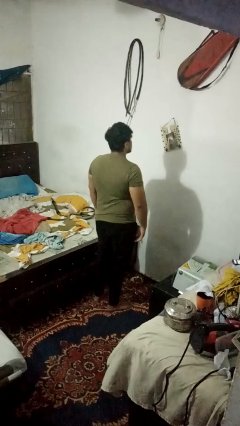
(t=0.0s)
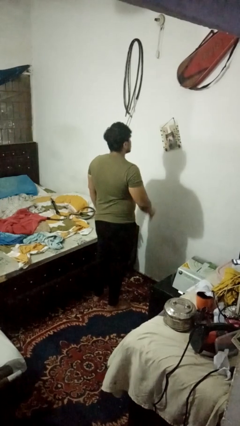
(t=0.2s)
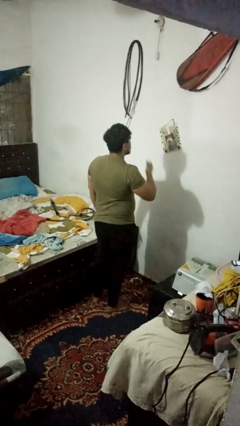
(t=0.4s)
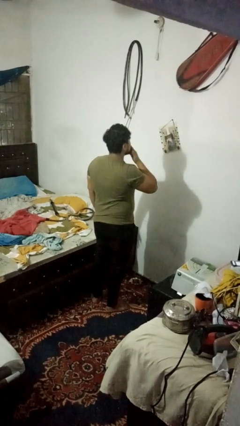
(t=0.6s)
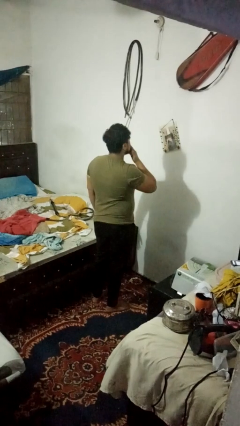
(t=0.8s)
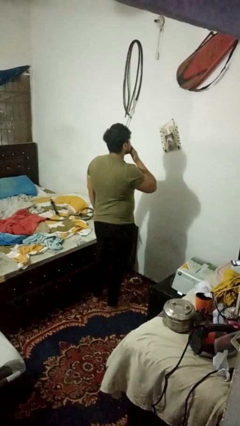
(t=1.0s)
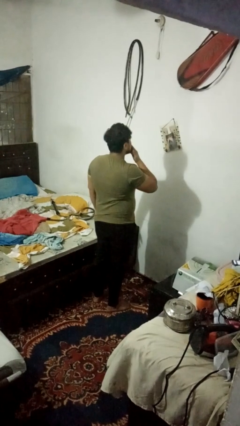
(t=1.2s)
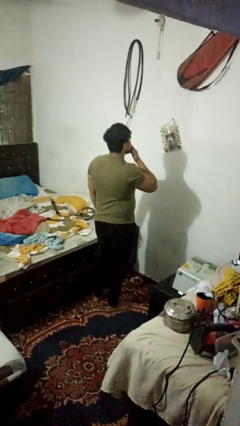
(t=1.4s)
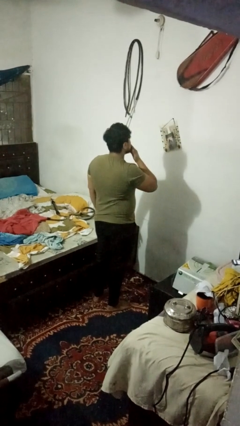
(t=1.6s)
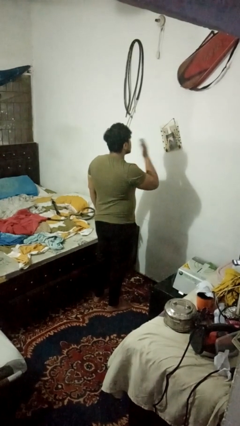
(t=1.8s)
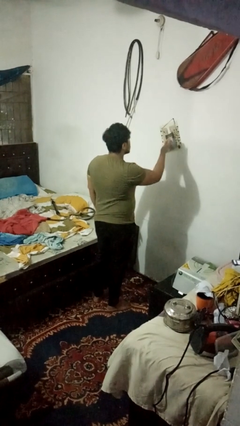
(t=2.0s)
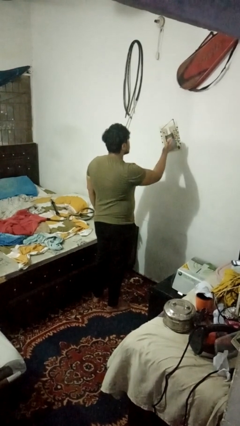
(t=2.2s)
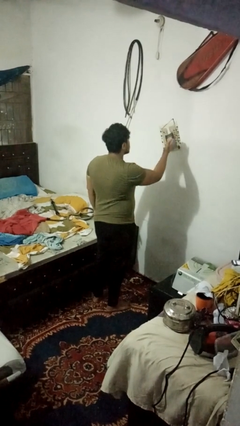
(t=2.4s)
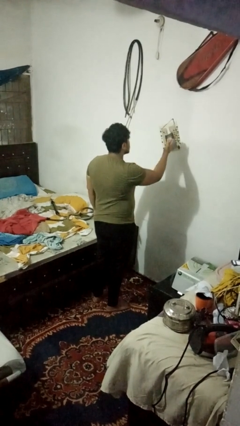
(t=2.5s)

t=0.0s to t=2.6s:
person gestures blow kiss

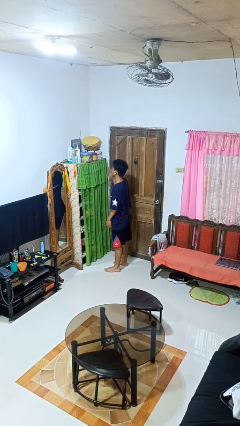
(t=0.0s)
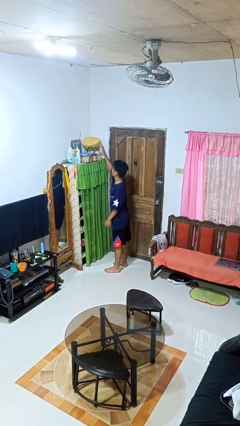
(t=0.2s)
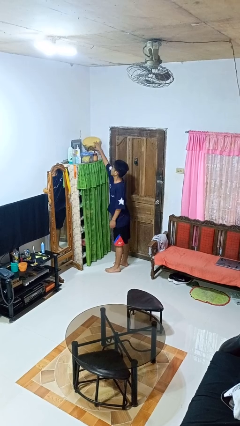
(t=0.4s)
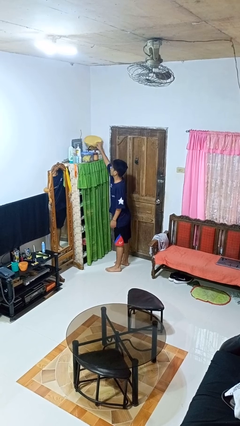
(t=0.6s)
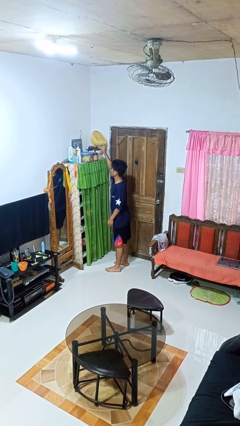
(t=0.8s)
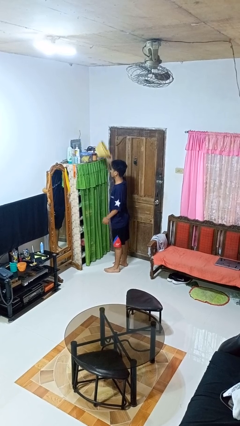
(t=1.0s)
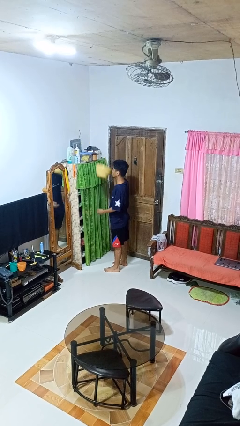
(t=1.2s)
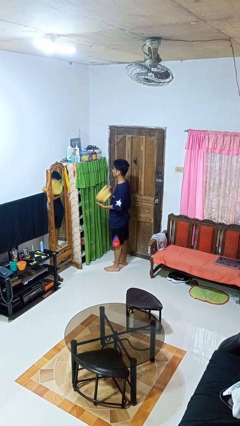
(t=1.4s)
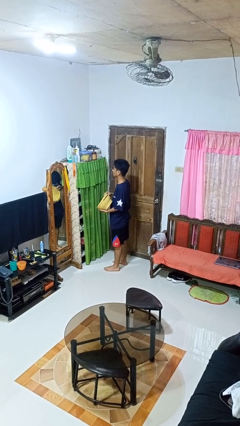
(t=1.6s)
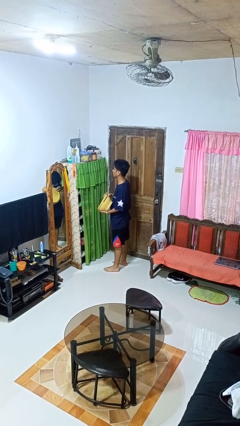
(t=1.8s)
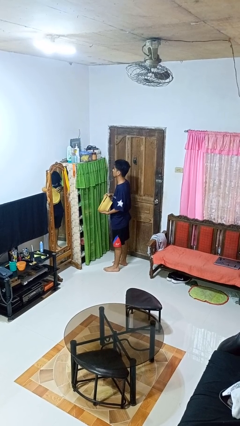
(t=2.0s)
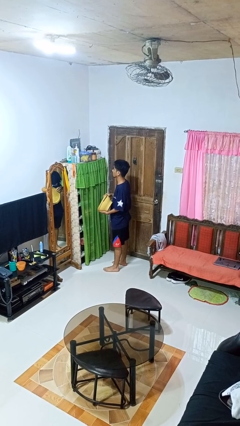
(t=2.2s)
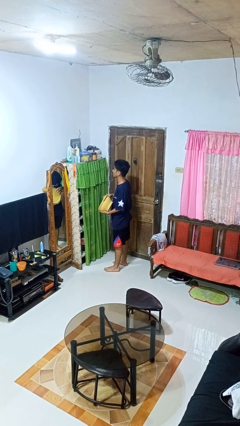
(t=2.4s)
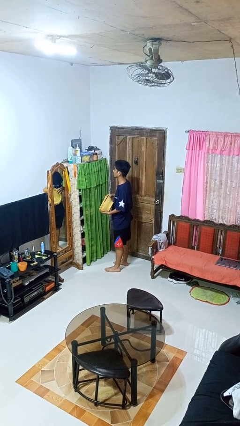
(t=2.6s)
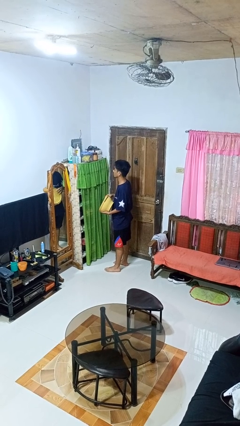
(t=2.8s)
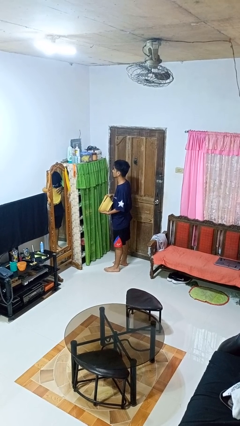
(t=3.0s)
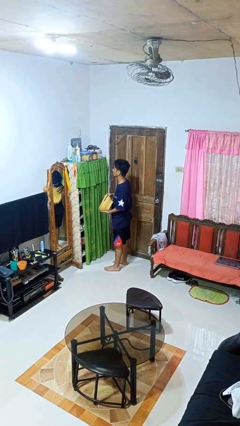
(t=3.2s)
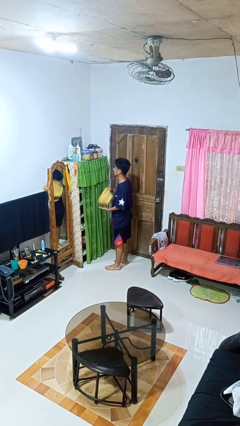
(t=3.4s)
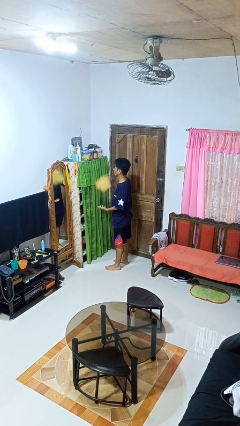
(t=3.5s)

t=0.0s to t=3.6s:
person picks up object from shelf

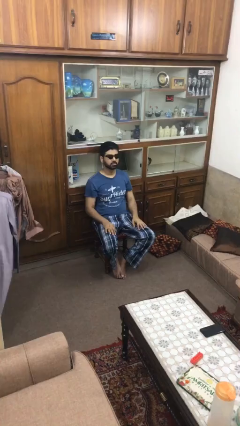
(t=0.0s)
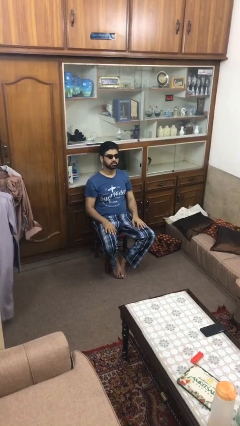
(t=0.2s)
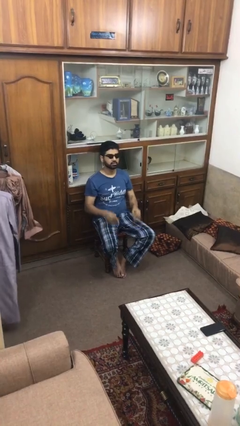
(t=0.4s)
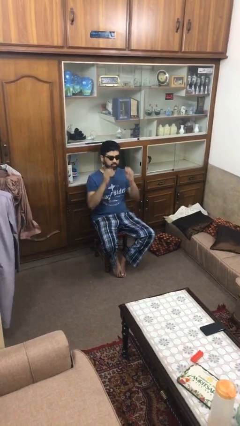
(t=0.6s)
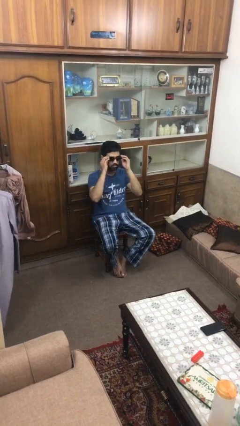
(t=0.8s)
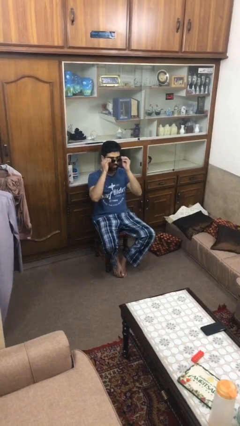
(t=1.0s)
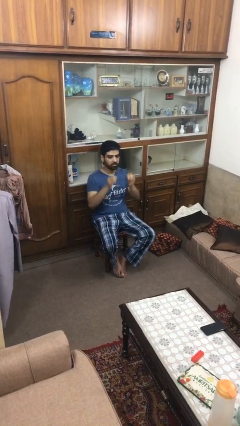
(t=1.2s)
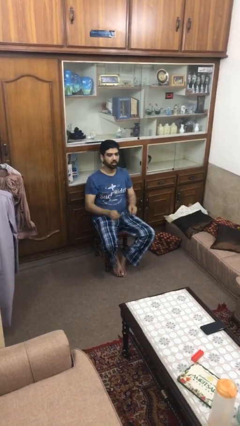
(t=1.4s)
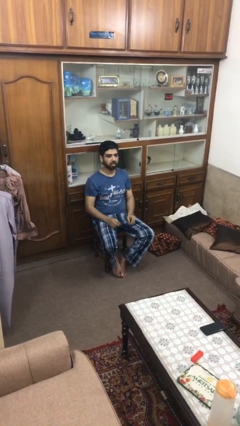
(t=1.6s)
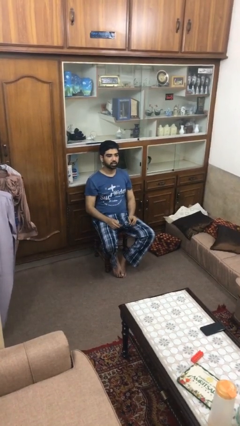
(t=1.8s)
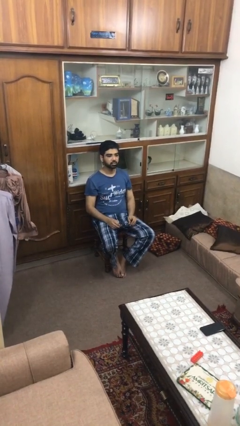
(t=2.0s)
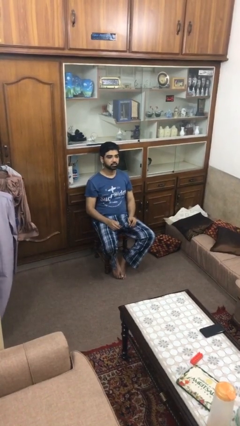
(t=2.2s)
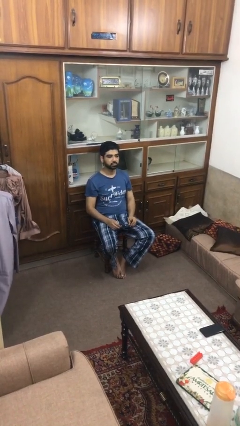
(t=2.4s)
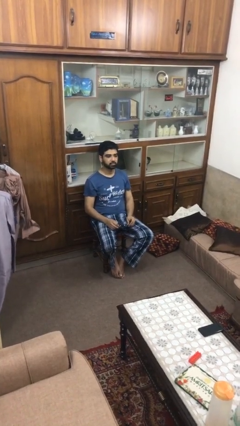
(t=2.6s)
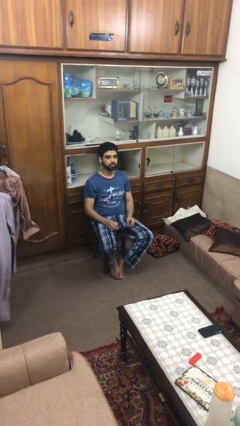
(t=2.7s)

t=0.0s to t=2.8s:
person takes off sunglasses

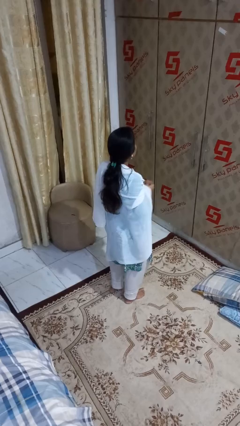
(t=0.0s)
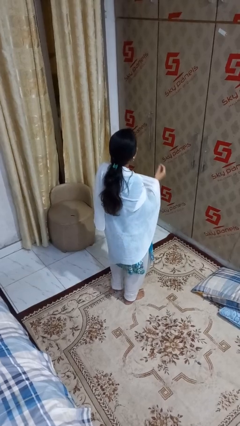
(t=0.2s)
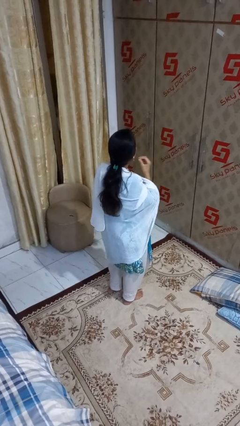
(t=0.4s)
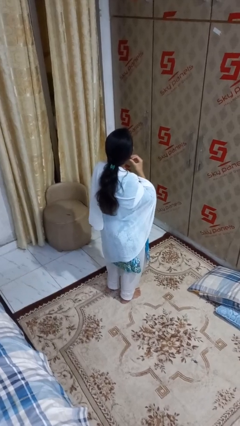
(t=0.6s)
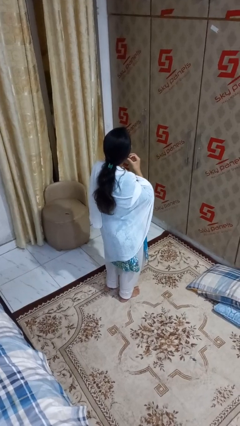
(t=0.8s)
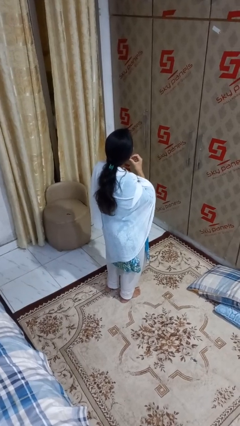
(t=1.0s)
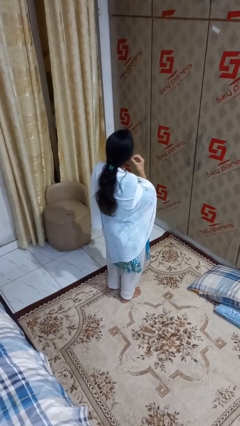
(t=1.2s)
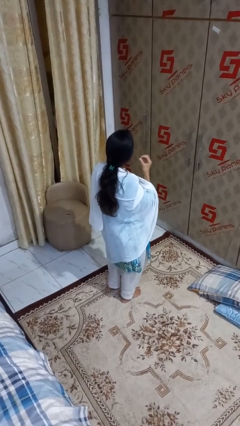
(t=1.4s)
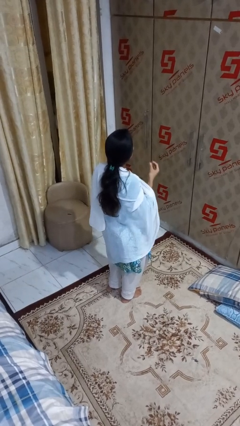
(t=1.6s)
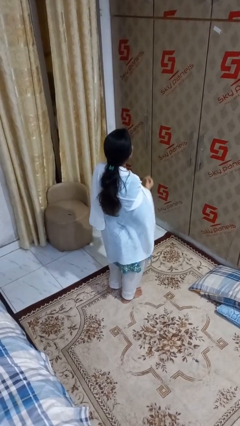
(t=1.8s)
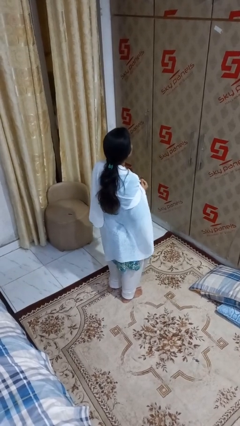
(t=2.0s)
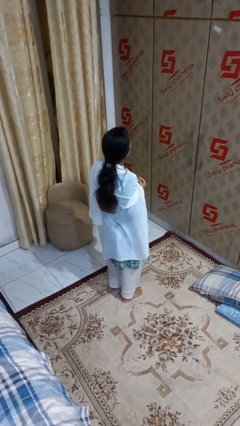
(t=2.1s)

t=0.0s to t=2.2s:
person takes off earrings

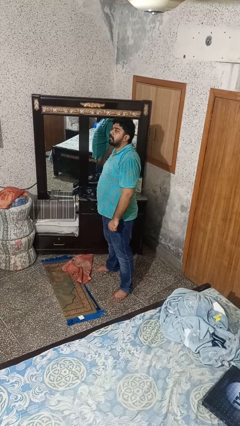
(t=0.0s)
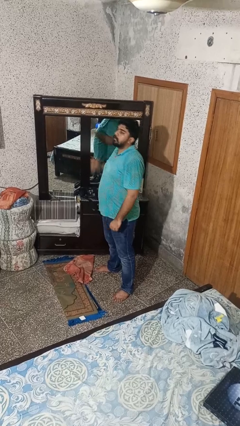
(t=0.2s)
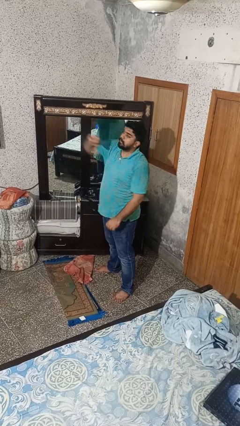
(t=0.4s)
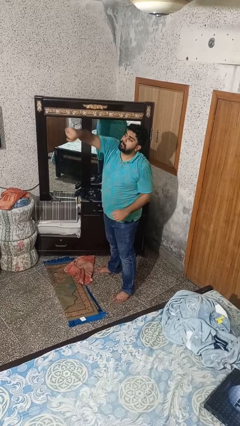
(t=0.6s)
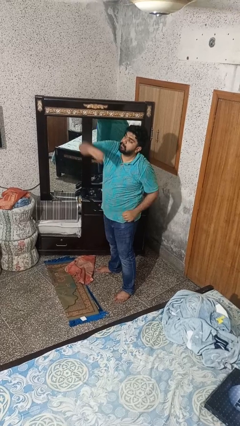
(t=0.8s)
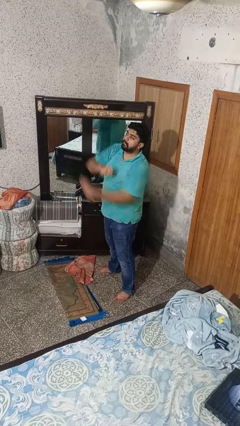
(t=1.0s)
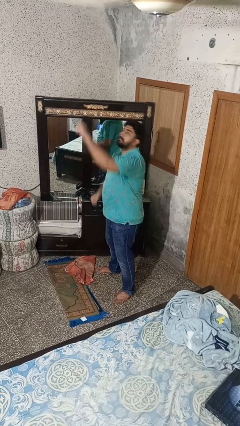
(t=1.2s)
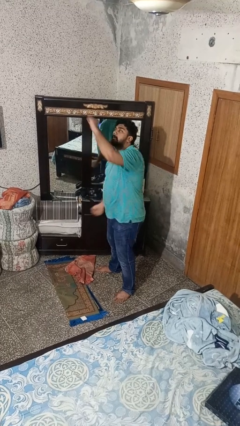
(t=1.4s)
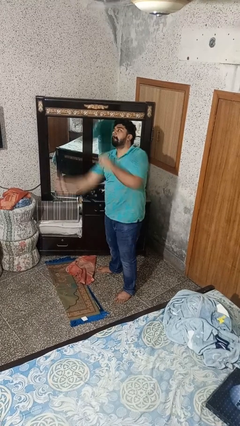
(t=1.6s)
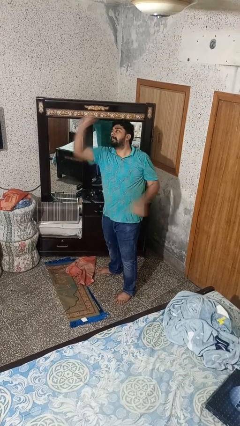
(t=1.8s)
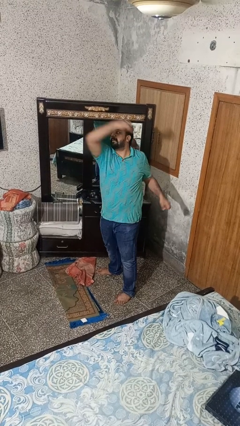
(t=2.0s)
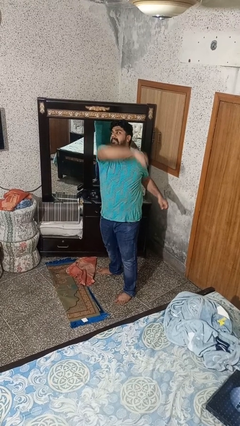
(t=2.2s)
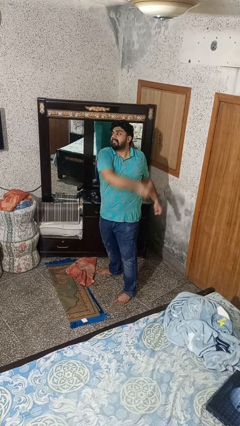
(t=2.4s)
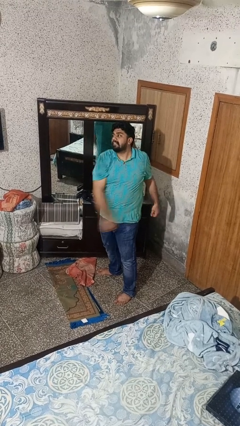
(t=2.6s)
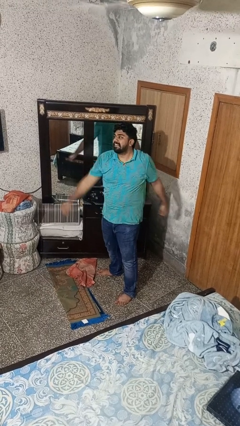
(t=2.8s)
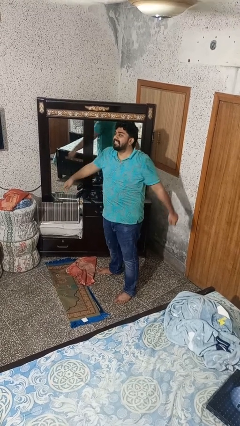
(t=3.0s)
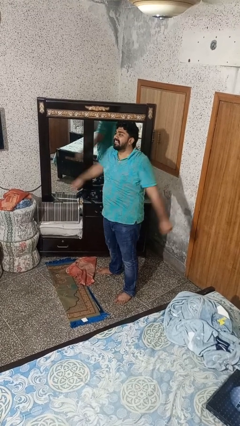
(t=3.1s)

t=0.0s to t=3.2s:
person punches

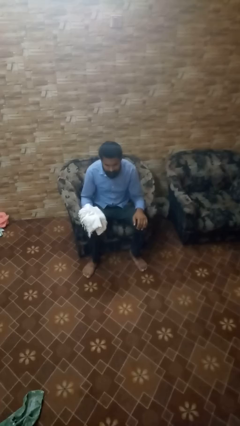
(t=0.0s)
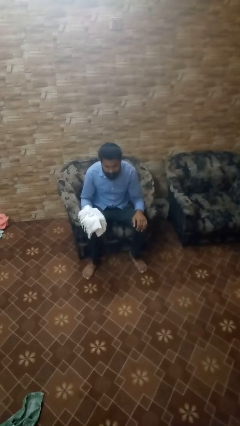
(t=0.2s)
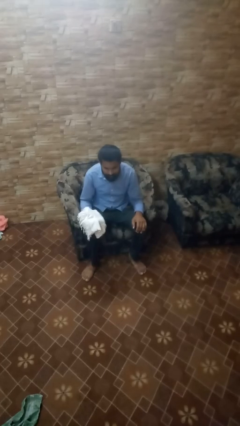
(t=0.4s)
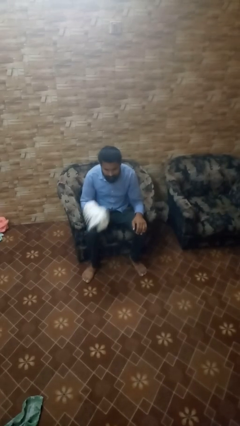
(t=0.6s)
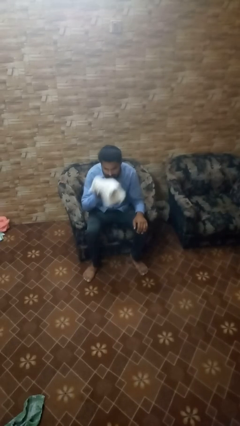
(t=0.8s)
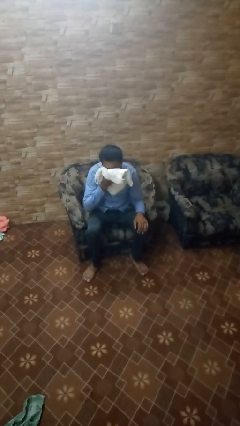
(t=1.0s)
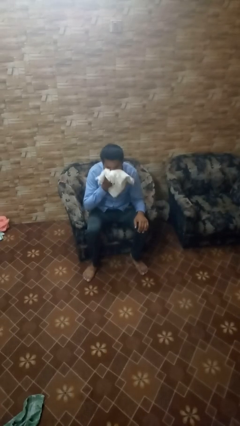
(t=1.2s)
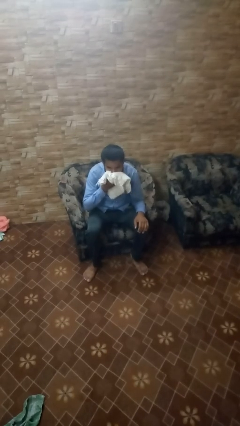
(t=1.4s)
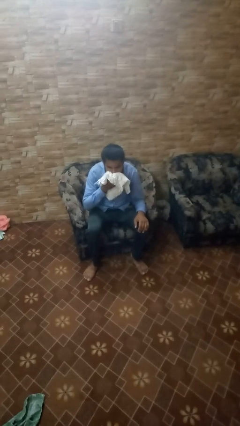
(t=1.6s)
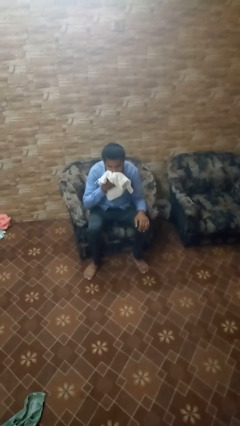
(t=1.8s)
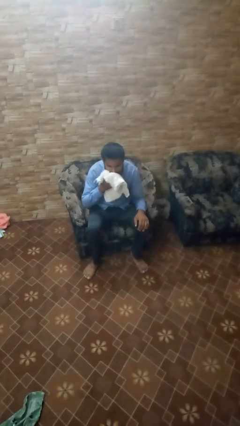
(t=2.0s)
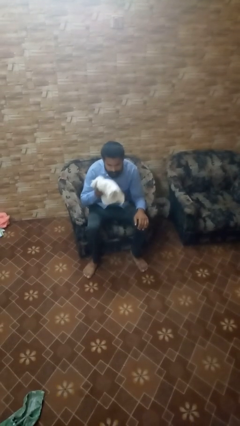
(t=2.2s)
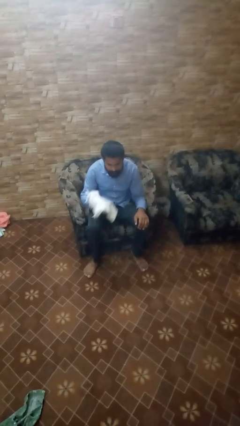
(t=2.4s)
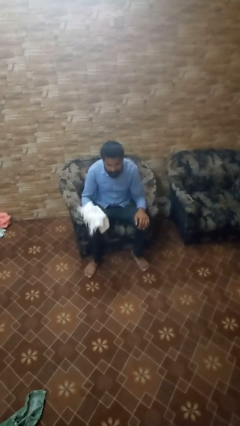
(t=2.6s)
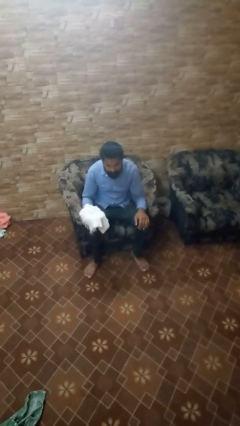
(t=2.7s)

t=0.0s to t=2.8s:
person wipes mouth with napkin
